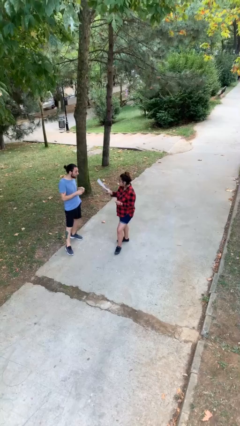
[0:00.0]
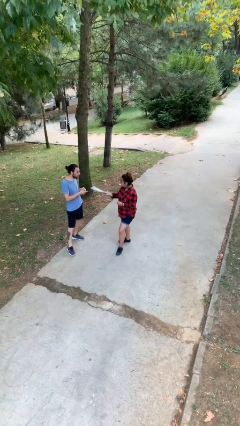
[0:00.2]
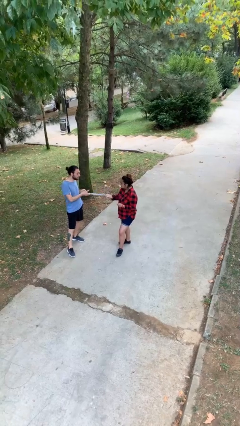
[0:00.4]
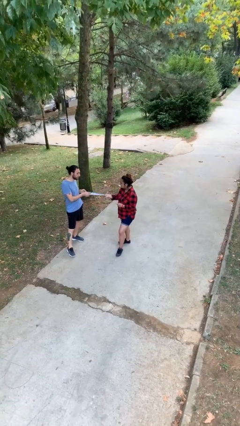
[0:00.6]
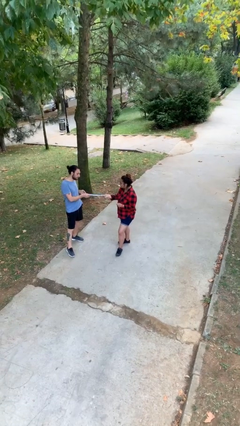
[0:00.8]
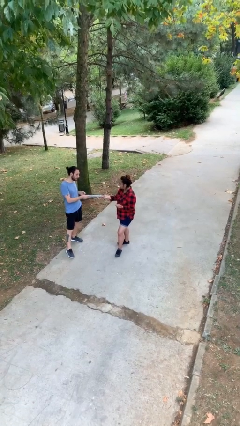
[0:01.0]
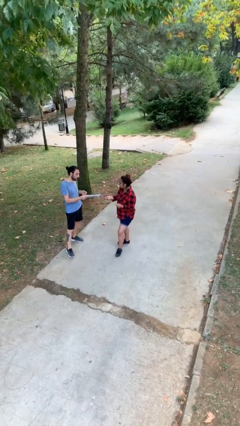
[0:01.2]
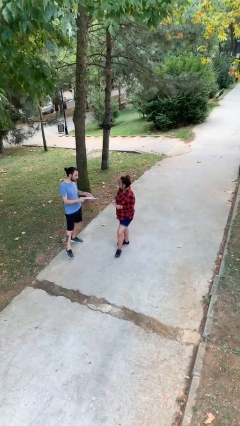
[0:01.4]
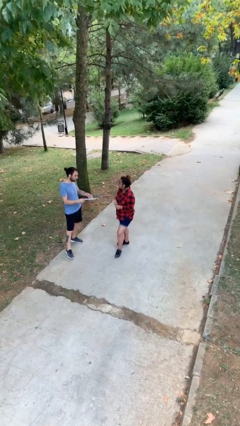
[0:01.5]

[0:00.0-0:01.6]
person transfers object to person

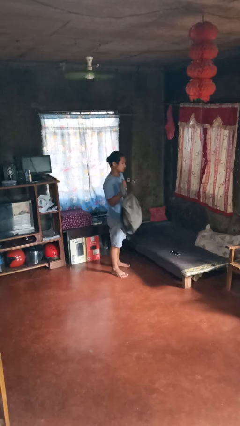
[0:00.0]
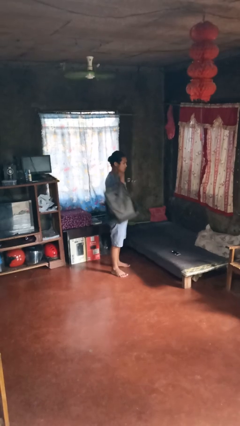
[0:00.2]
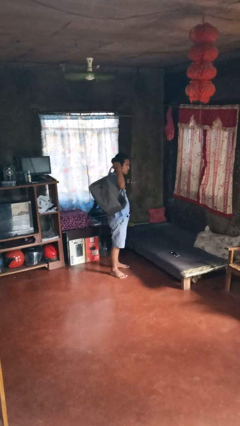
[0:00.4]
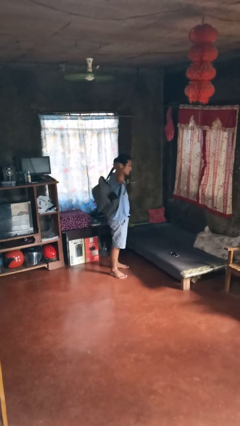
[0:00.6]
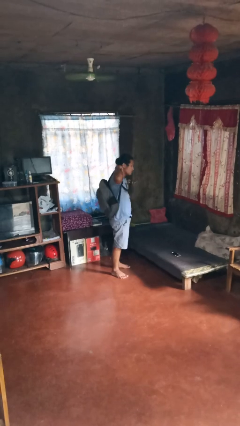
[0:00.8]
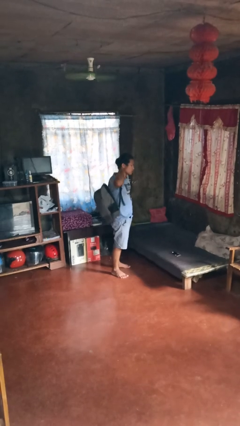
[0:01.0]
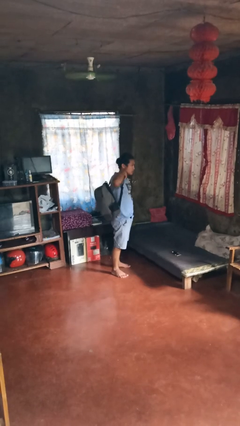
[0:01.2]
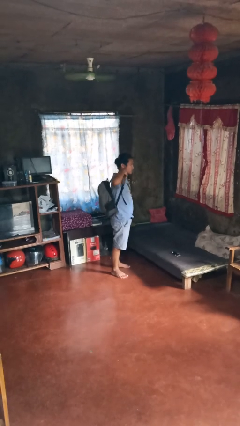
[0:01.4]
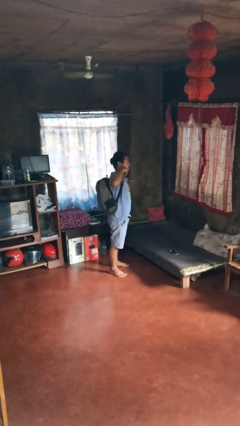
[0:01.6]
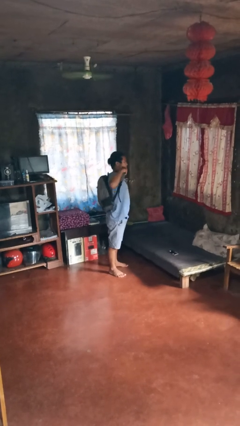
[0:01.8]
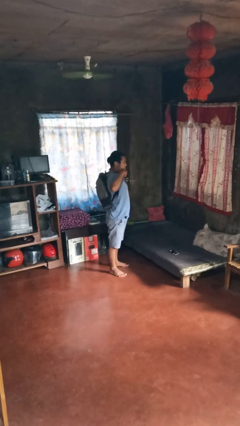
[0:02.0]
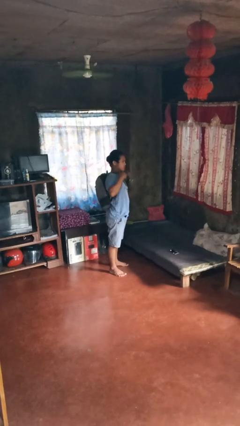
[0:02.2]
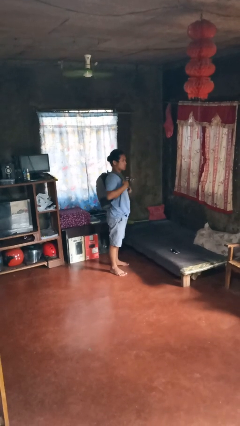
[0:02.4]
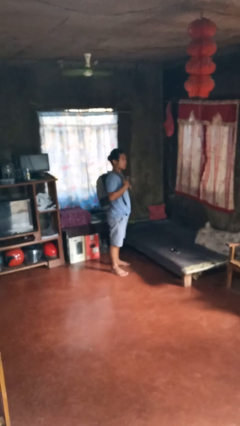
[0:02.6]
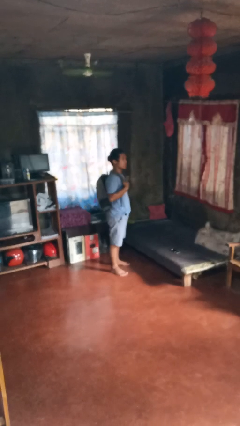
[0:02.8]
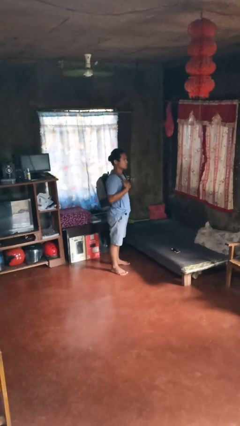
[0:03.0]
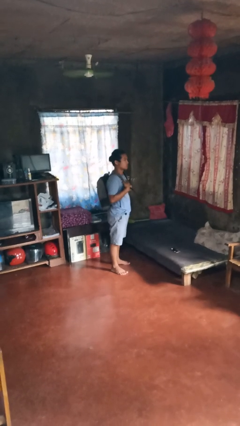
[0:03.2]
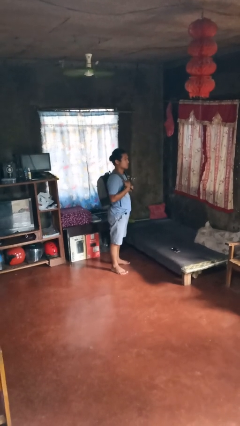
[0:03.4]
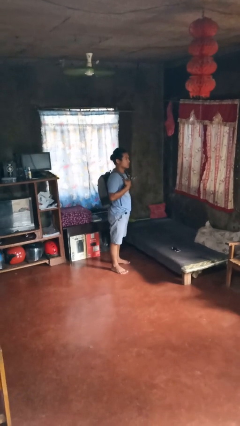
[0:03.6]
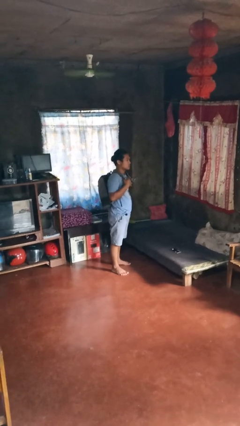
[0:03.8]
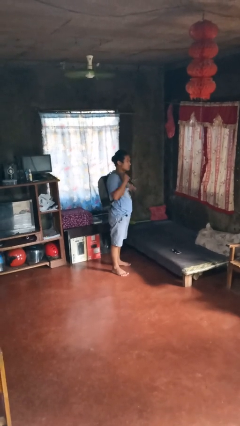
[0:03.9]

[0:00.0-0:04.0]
person puts on backpack

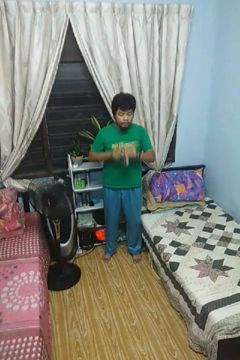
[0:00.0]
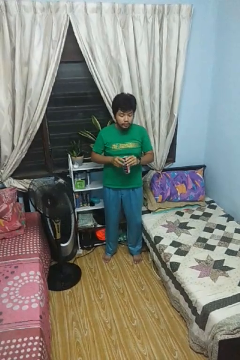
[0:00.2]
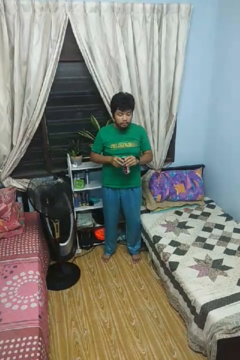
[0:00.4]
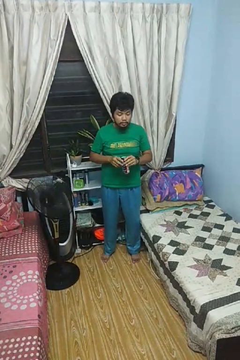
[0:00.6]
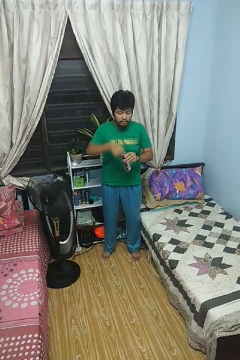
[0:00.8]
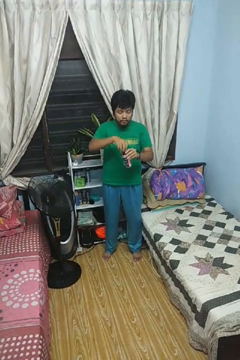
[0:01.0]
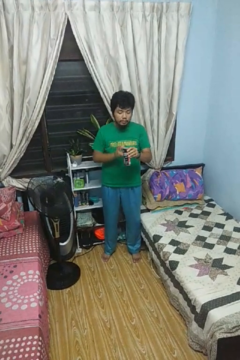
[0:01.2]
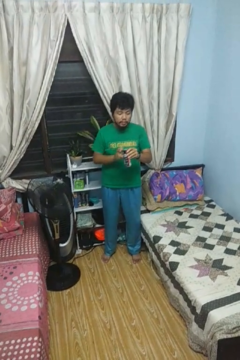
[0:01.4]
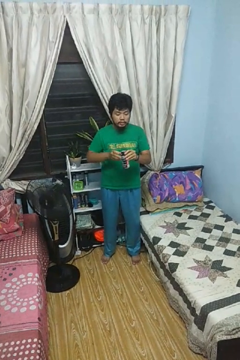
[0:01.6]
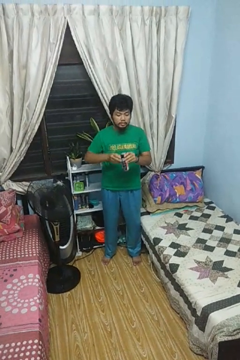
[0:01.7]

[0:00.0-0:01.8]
person opens beverage can

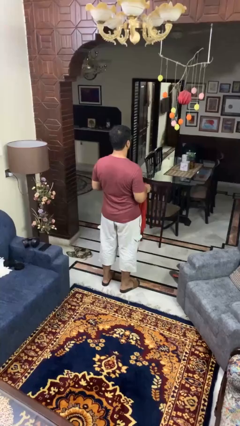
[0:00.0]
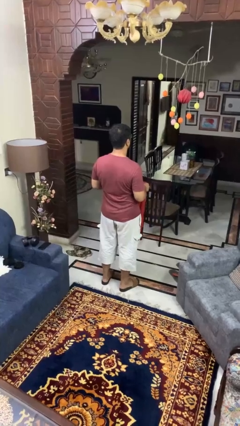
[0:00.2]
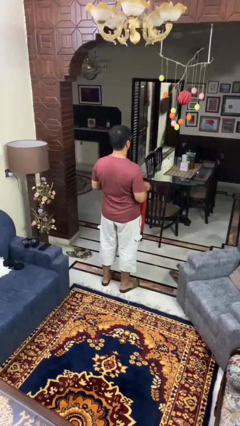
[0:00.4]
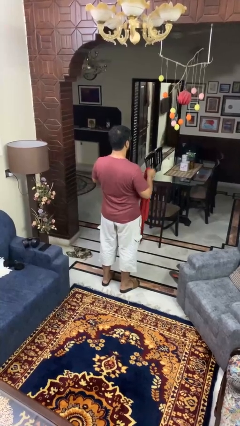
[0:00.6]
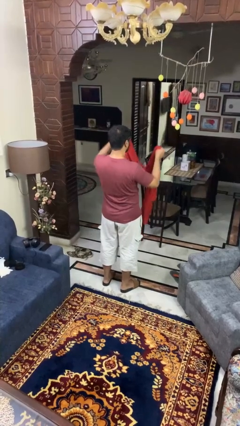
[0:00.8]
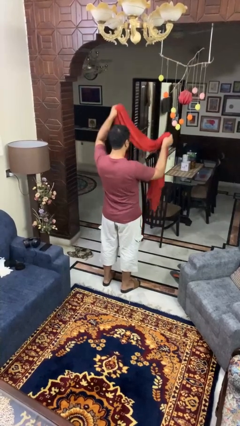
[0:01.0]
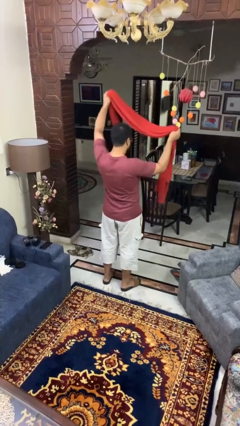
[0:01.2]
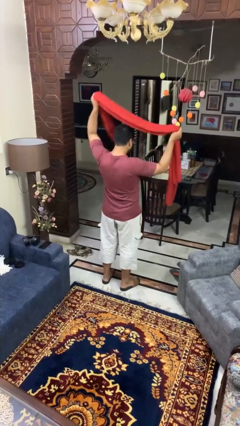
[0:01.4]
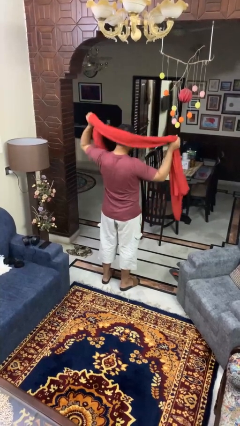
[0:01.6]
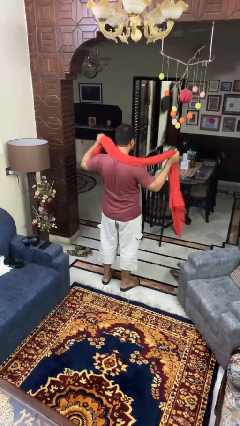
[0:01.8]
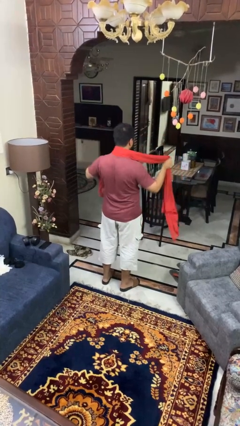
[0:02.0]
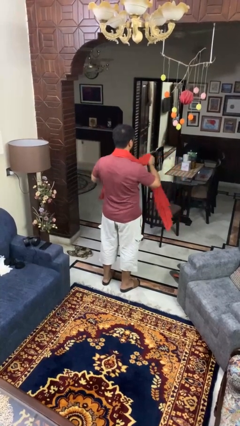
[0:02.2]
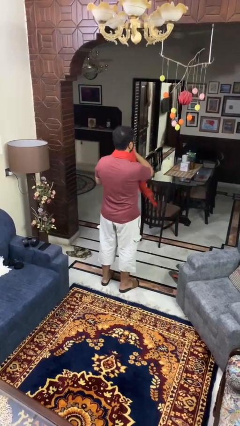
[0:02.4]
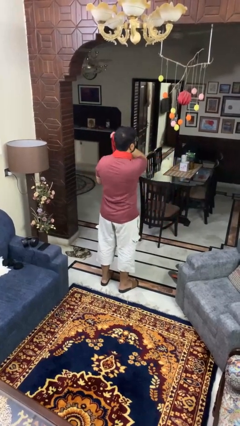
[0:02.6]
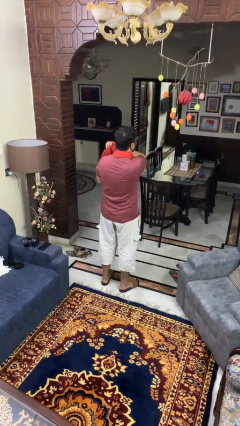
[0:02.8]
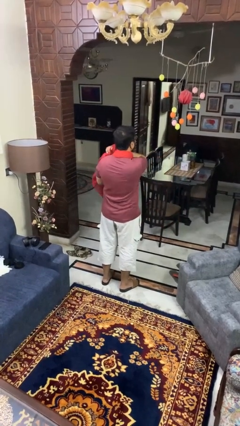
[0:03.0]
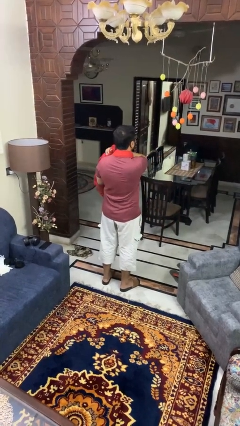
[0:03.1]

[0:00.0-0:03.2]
person puts on scarf

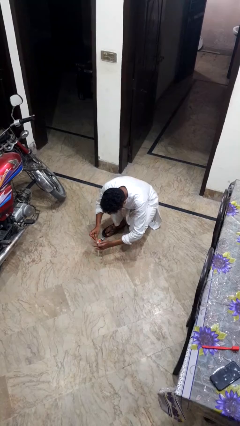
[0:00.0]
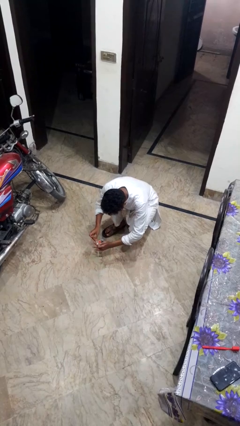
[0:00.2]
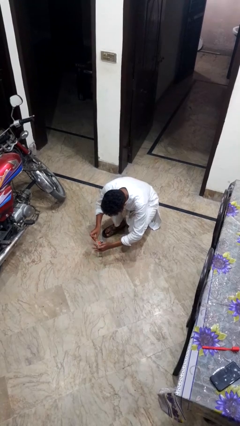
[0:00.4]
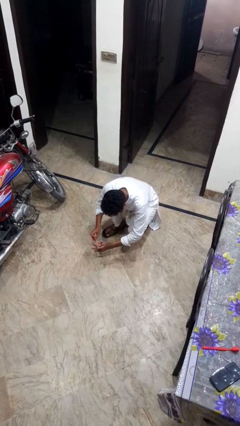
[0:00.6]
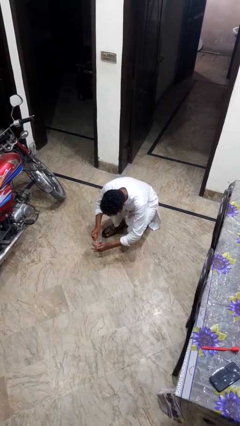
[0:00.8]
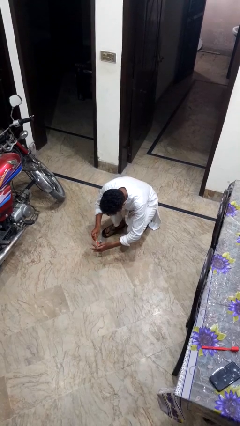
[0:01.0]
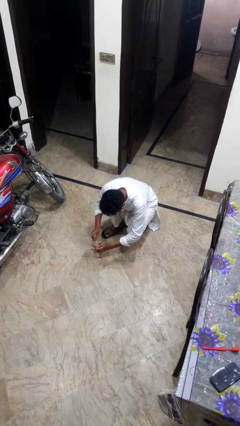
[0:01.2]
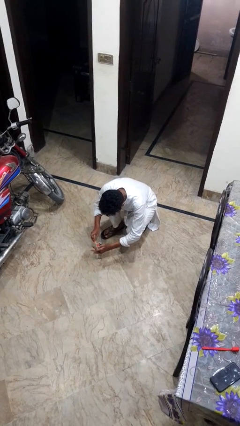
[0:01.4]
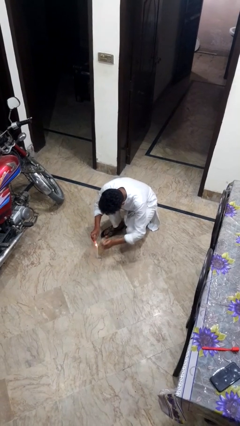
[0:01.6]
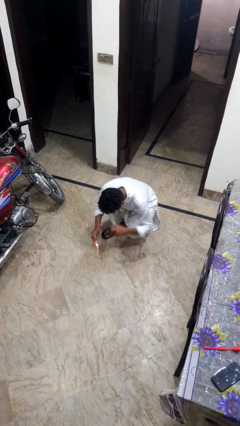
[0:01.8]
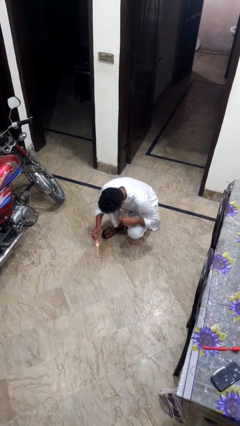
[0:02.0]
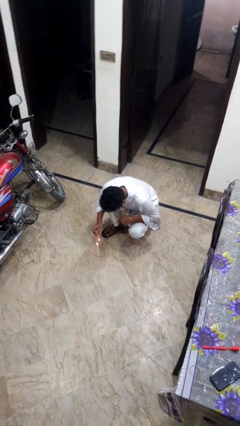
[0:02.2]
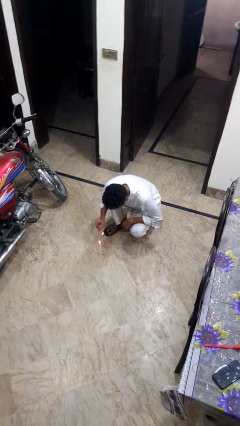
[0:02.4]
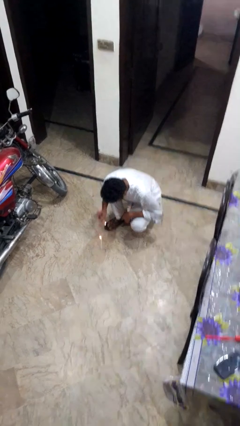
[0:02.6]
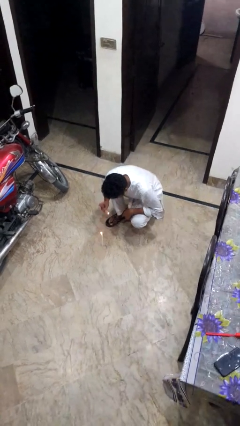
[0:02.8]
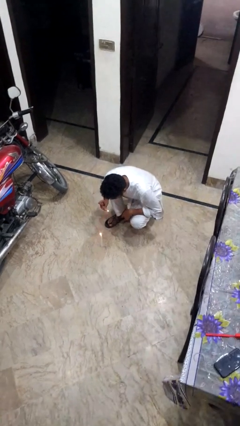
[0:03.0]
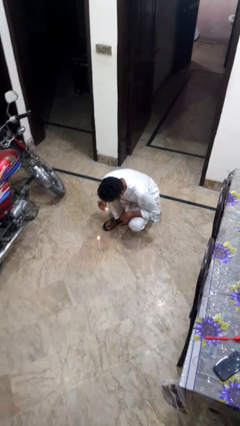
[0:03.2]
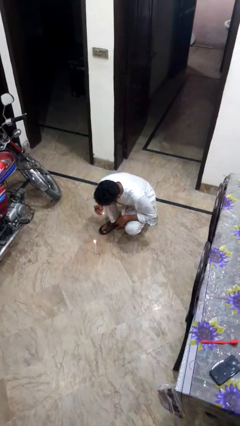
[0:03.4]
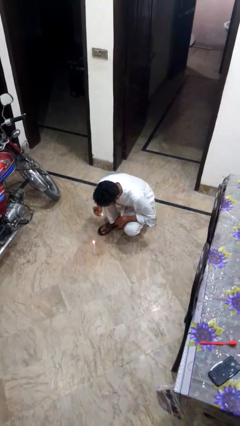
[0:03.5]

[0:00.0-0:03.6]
person lights candle

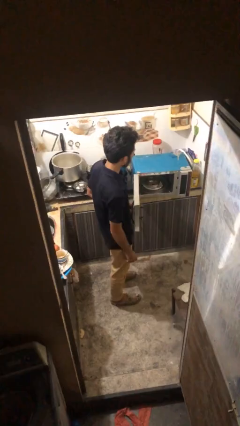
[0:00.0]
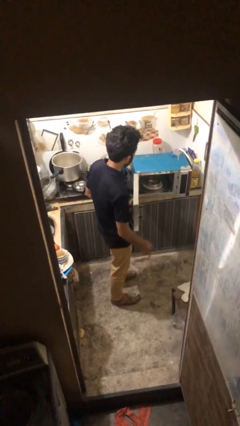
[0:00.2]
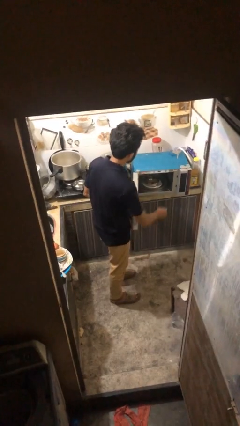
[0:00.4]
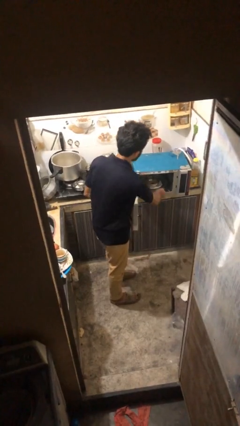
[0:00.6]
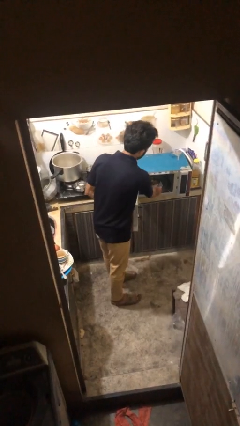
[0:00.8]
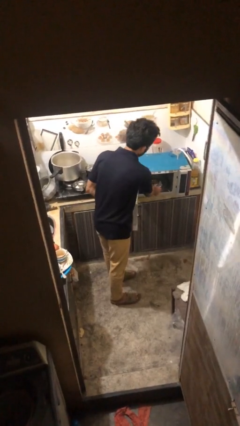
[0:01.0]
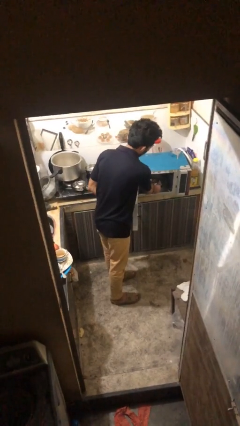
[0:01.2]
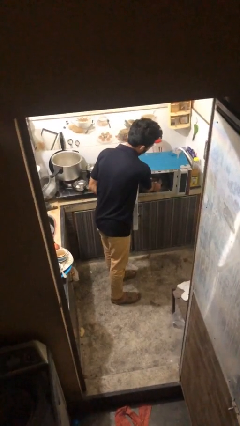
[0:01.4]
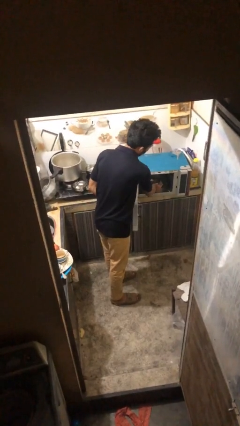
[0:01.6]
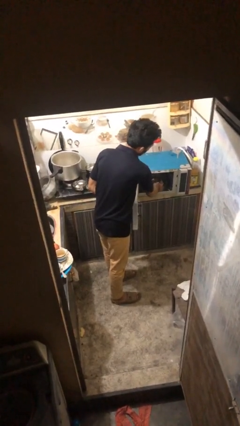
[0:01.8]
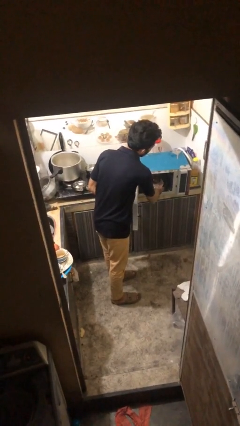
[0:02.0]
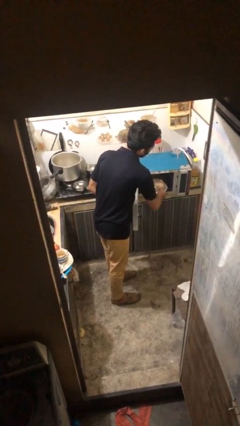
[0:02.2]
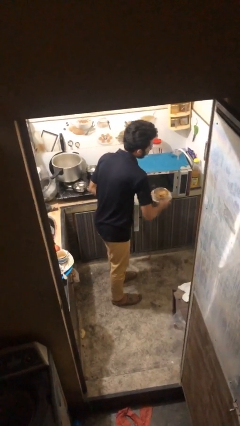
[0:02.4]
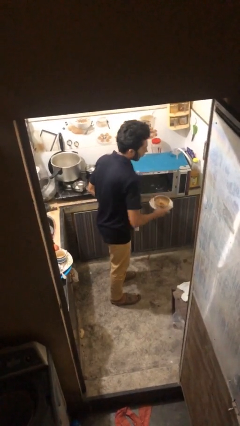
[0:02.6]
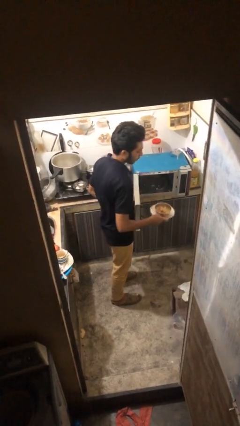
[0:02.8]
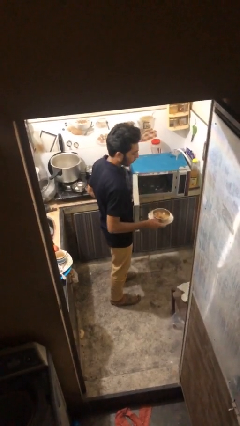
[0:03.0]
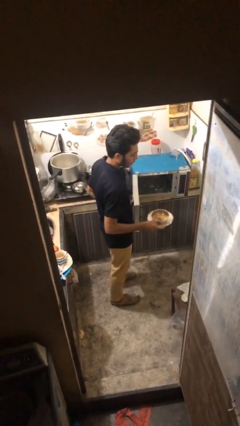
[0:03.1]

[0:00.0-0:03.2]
person takes object from microwave

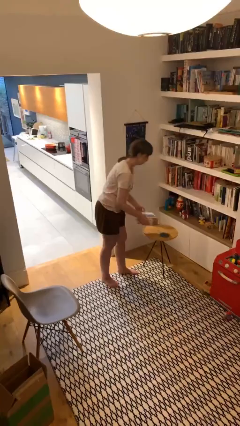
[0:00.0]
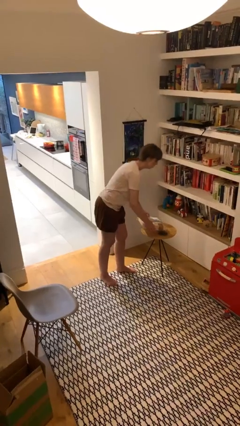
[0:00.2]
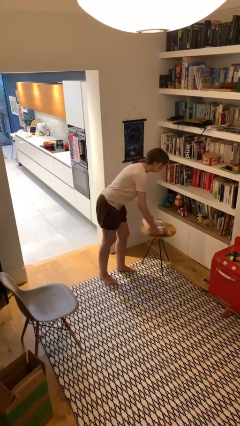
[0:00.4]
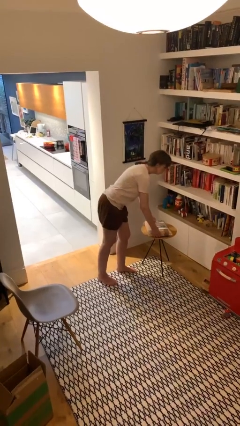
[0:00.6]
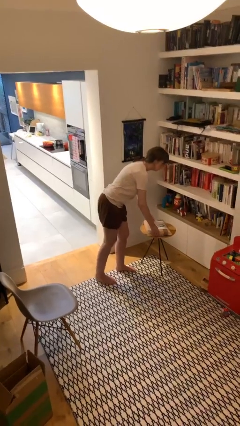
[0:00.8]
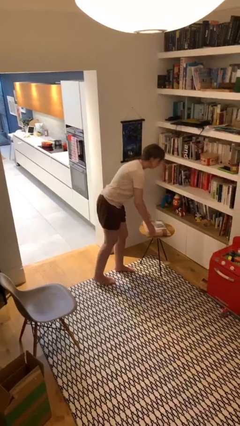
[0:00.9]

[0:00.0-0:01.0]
person puts down object on table
